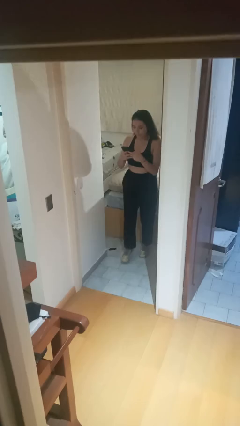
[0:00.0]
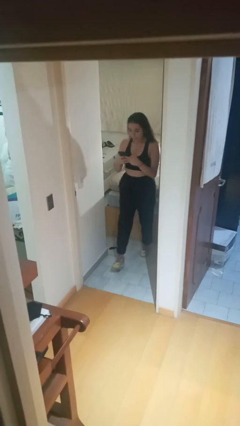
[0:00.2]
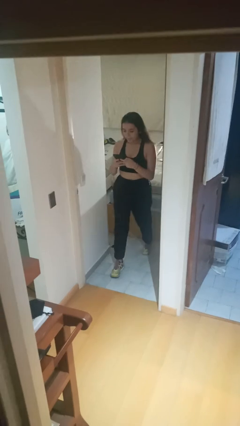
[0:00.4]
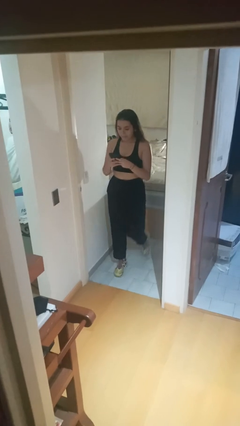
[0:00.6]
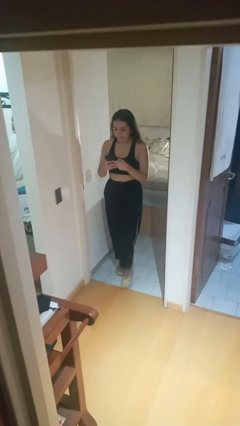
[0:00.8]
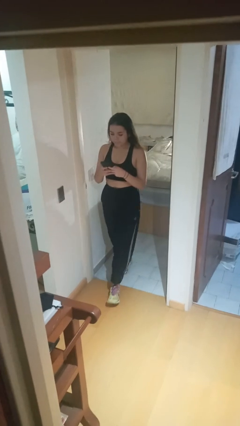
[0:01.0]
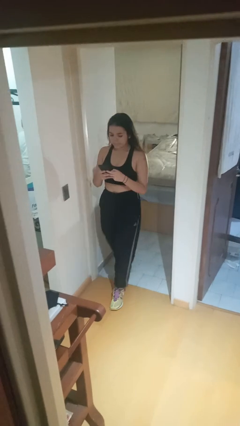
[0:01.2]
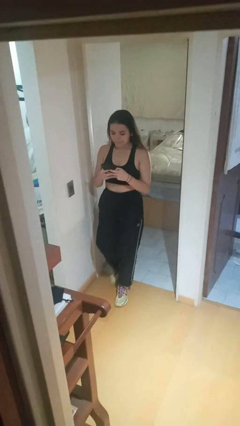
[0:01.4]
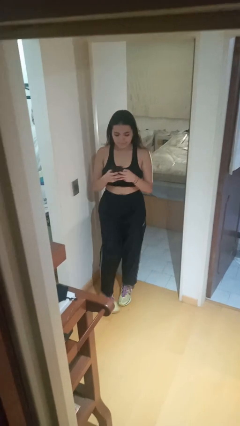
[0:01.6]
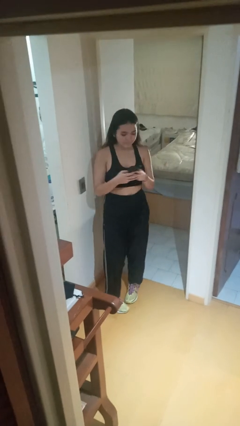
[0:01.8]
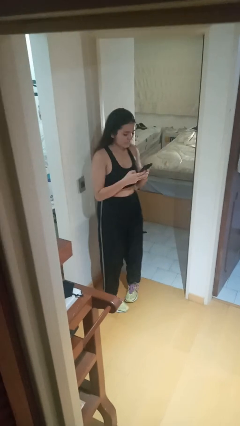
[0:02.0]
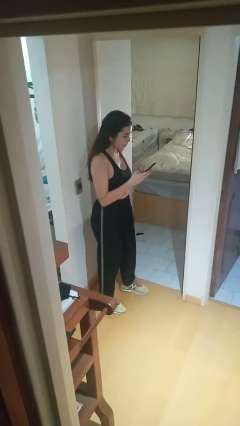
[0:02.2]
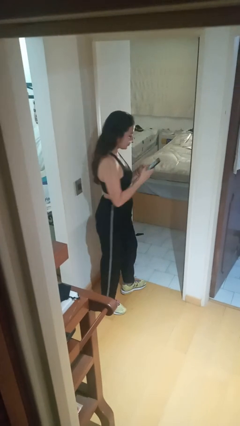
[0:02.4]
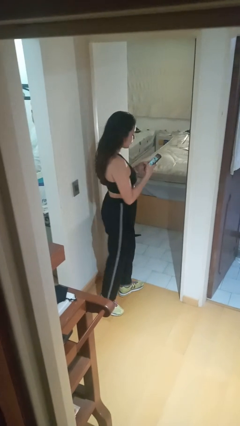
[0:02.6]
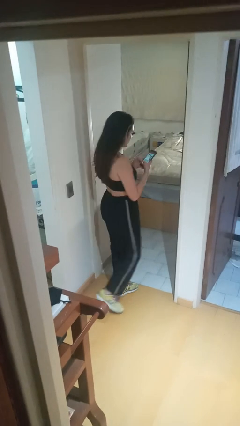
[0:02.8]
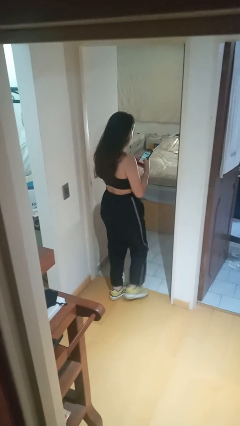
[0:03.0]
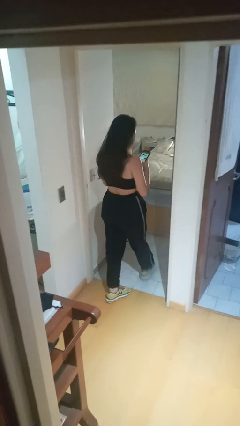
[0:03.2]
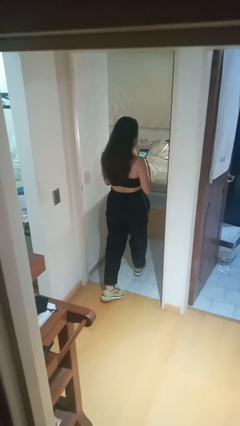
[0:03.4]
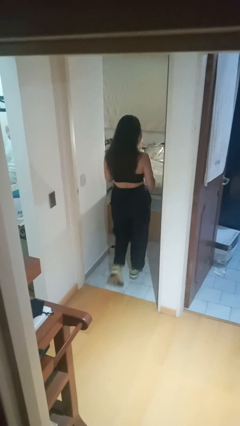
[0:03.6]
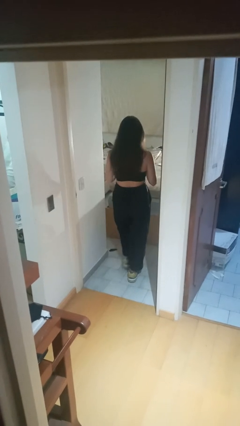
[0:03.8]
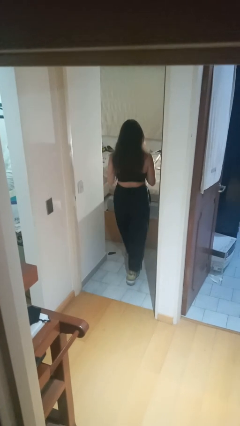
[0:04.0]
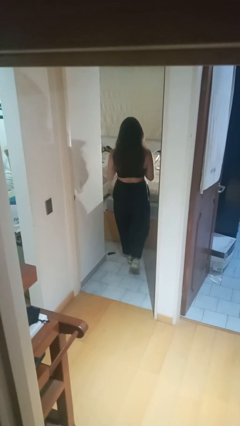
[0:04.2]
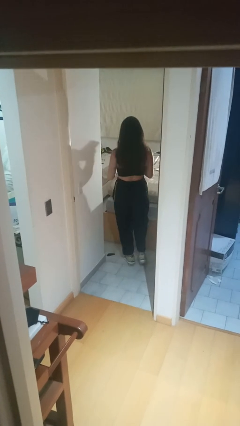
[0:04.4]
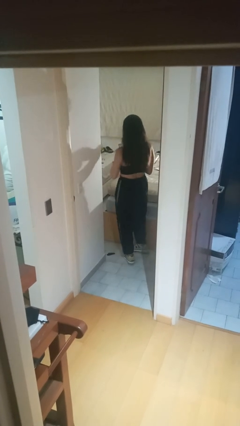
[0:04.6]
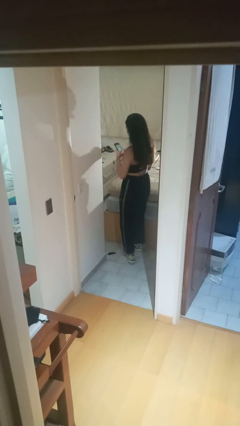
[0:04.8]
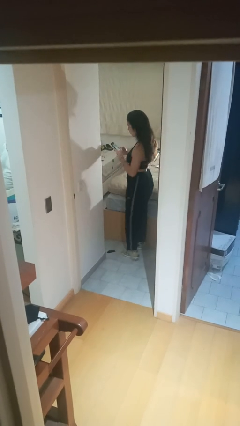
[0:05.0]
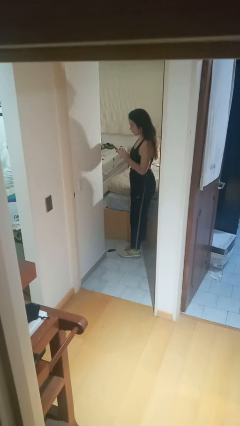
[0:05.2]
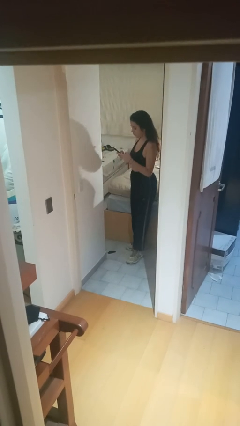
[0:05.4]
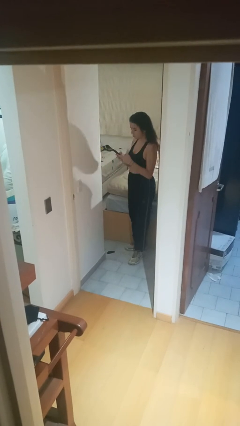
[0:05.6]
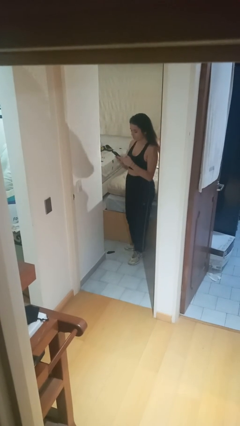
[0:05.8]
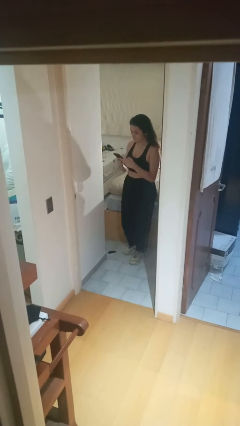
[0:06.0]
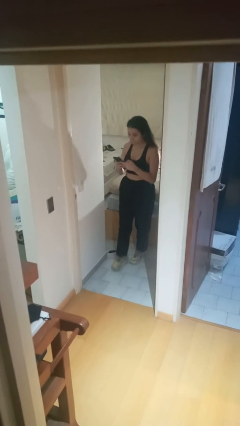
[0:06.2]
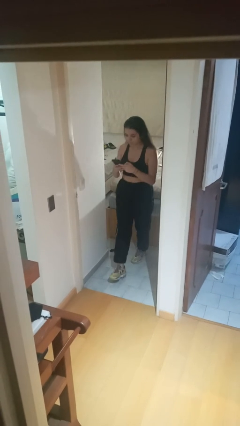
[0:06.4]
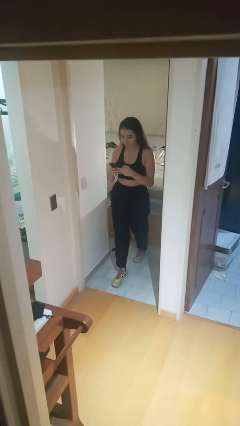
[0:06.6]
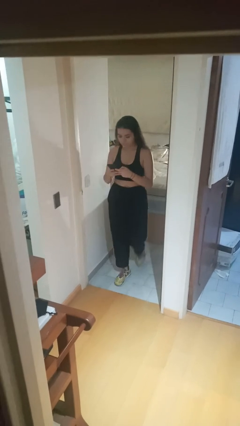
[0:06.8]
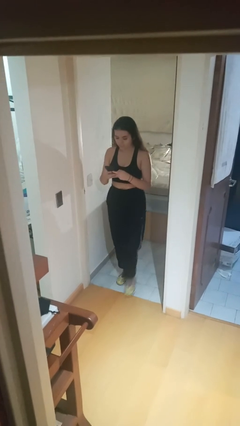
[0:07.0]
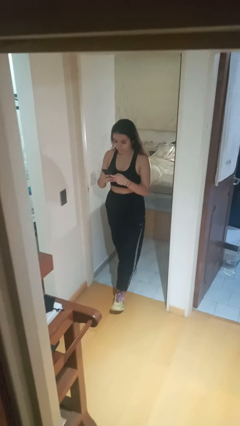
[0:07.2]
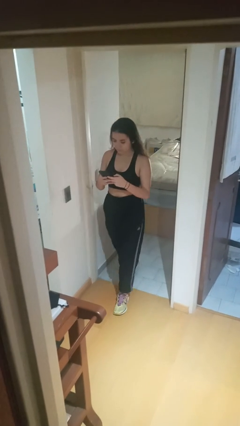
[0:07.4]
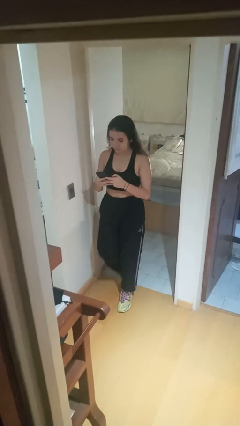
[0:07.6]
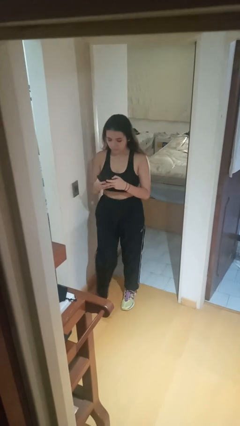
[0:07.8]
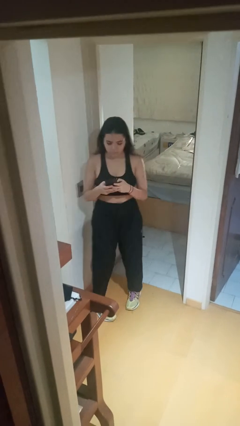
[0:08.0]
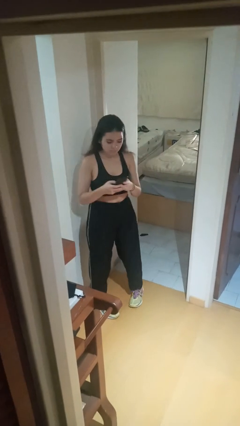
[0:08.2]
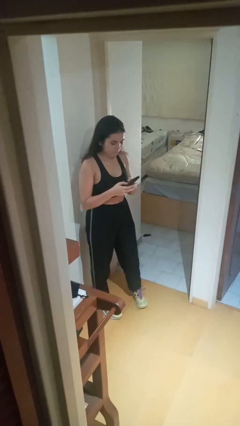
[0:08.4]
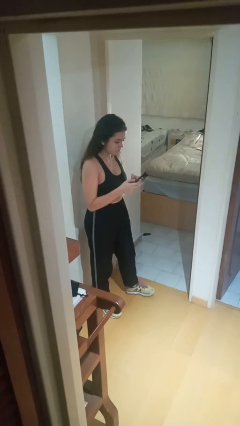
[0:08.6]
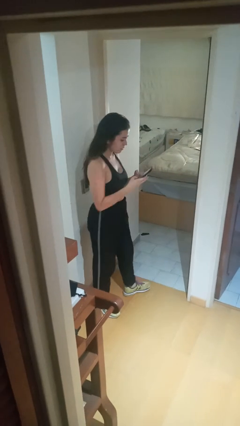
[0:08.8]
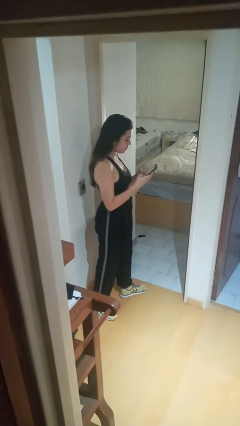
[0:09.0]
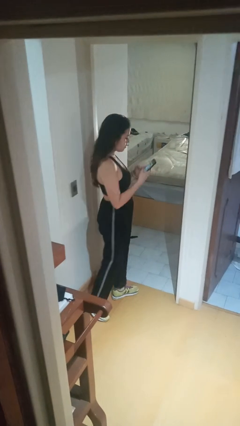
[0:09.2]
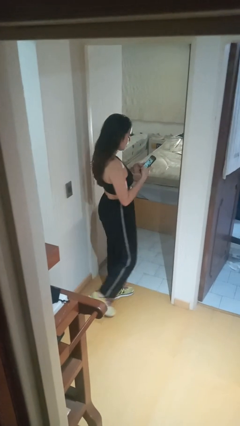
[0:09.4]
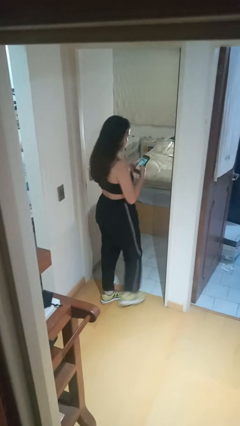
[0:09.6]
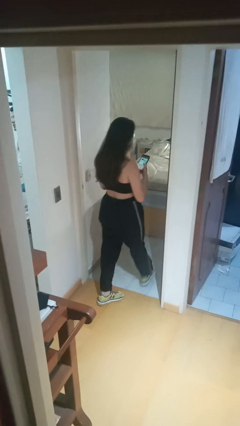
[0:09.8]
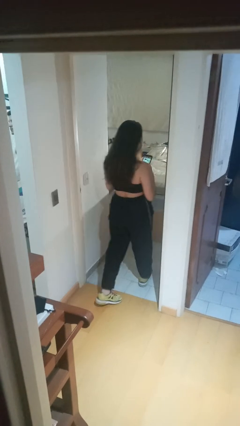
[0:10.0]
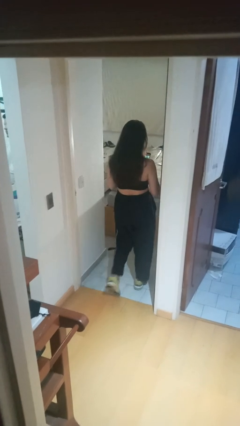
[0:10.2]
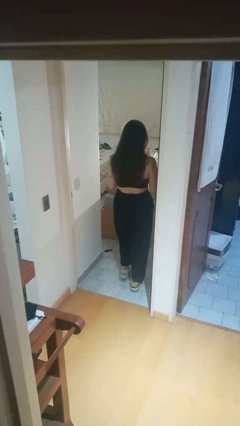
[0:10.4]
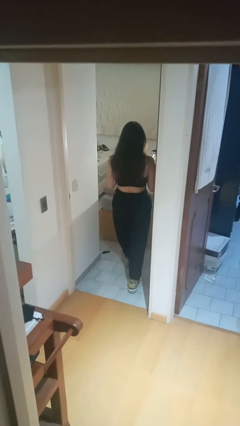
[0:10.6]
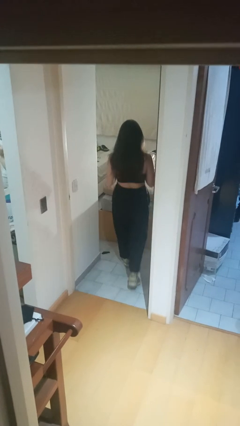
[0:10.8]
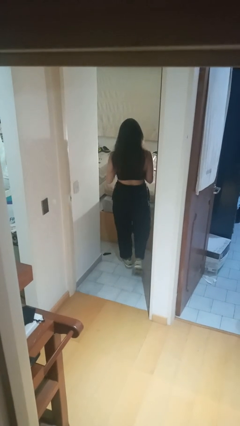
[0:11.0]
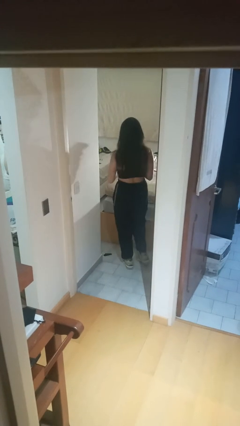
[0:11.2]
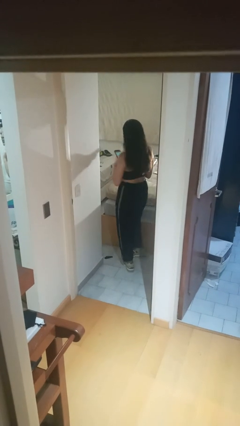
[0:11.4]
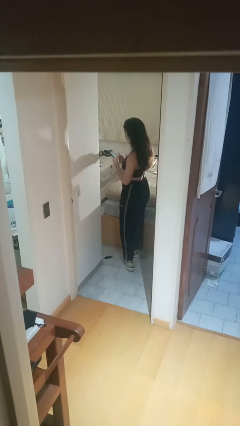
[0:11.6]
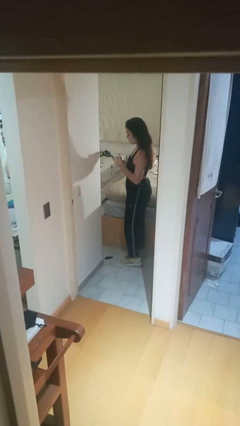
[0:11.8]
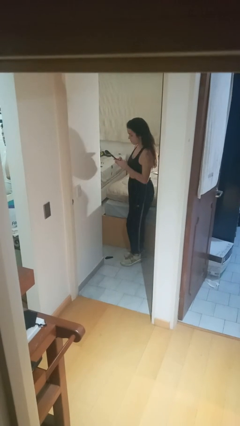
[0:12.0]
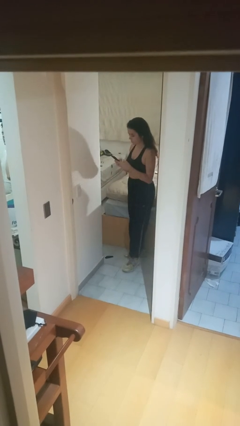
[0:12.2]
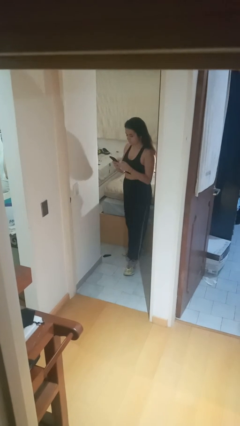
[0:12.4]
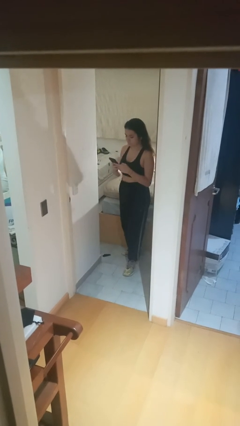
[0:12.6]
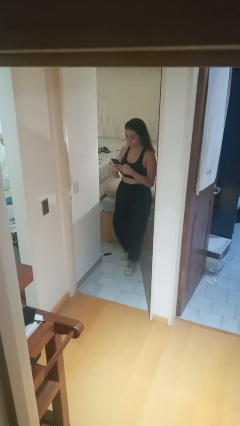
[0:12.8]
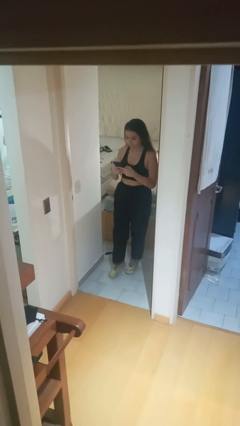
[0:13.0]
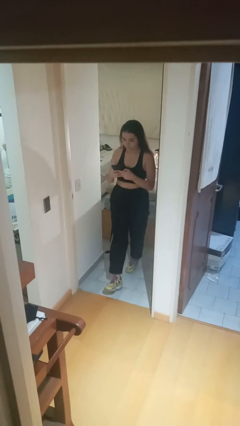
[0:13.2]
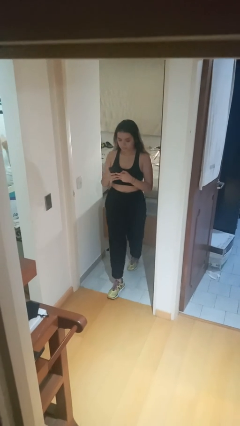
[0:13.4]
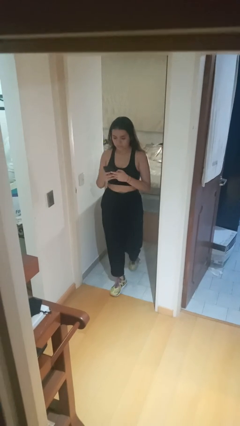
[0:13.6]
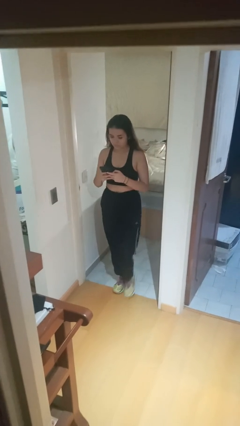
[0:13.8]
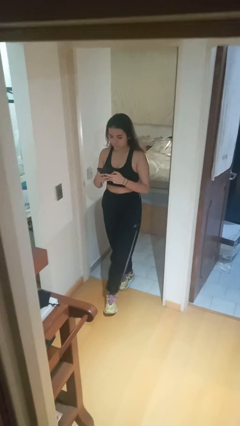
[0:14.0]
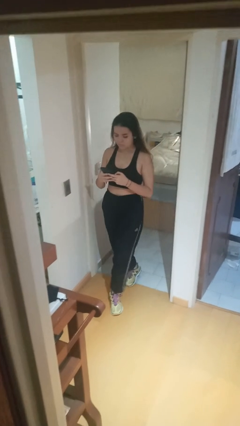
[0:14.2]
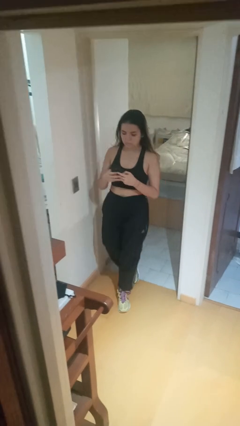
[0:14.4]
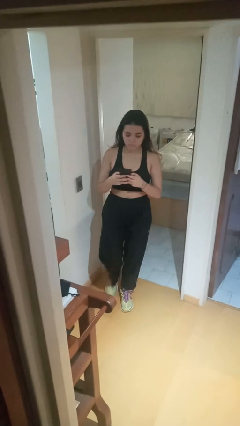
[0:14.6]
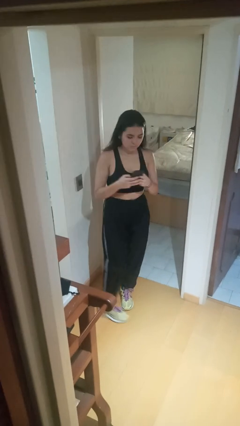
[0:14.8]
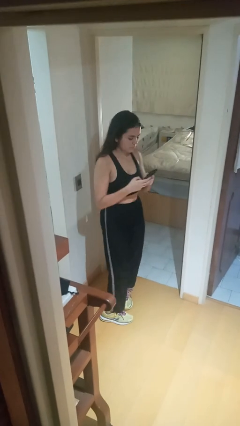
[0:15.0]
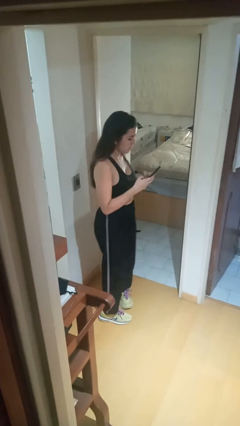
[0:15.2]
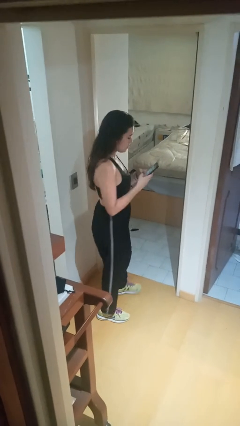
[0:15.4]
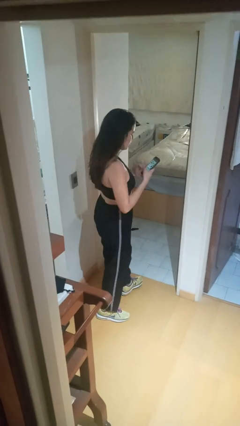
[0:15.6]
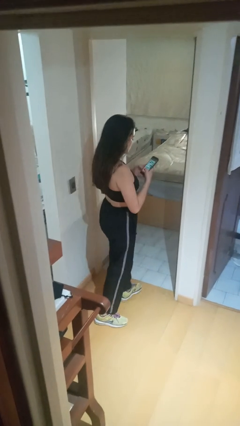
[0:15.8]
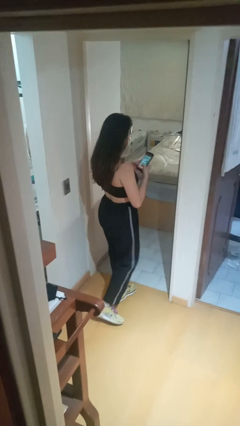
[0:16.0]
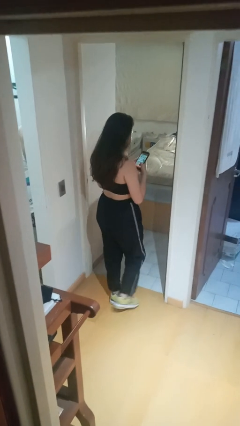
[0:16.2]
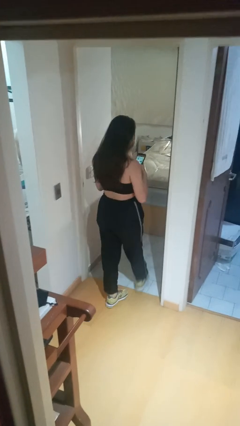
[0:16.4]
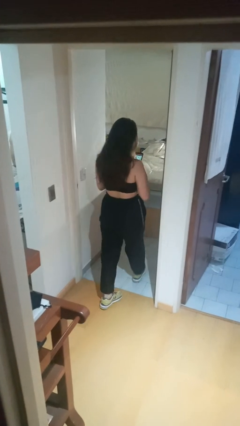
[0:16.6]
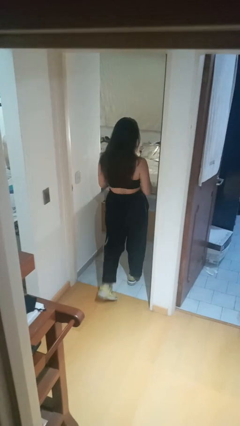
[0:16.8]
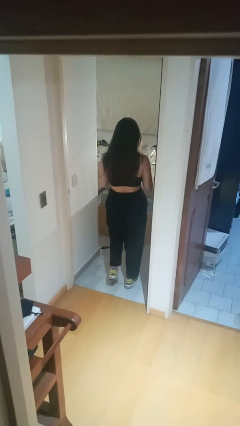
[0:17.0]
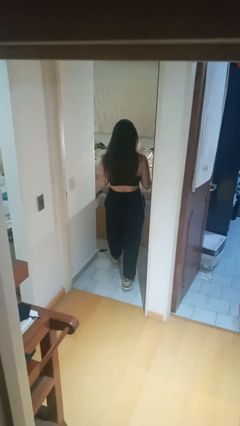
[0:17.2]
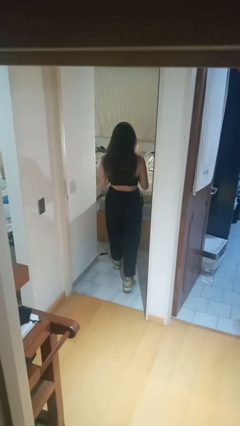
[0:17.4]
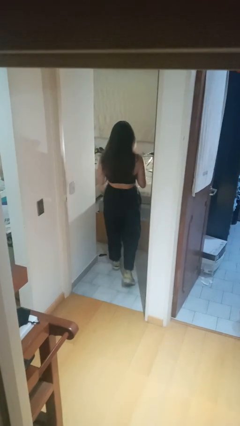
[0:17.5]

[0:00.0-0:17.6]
person texts on phone

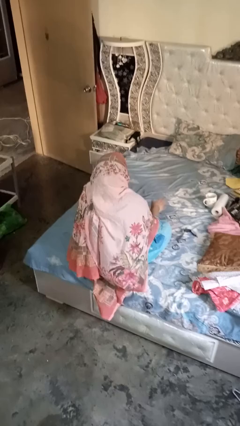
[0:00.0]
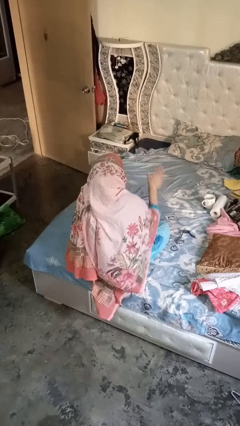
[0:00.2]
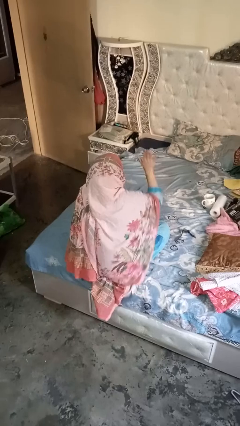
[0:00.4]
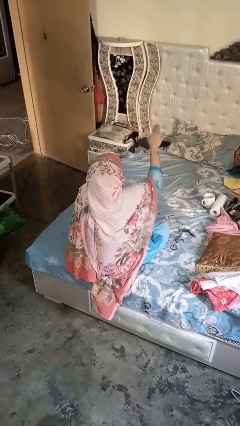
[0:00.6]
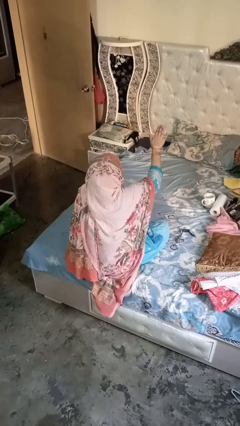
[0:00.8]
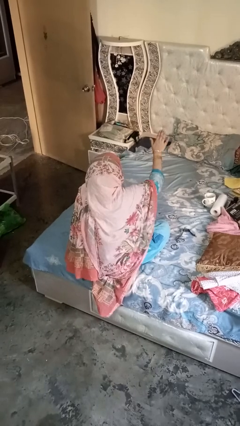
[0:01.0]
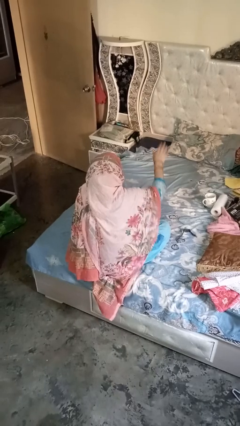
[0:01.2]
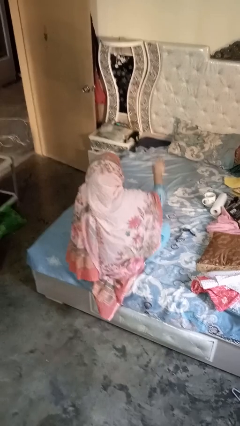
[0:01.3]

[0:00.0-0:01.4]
person gestures stop
